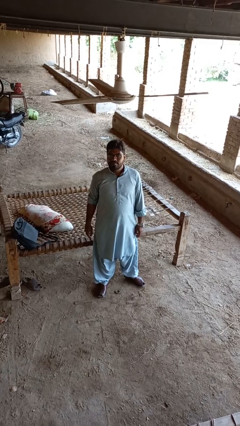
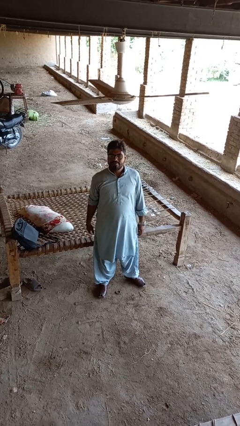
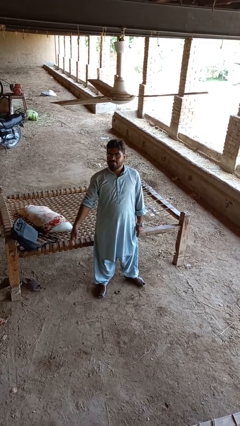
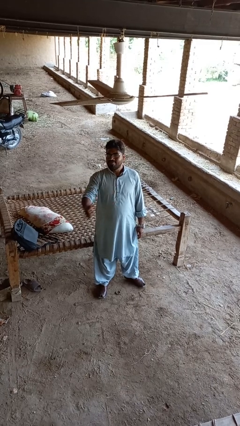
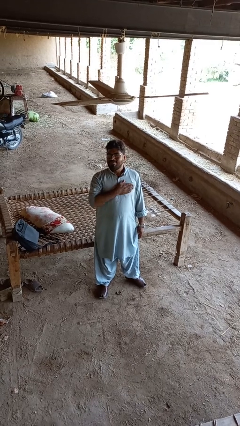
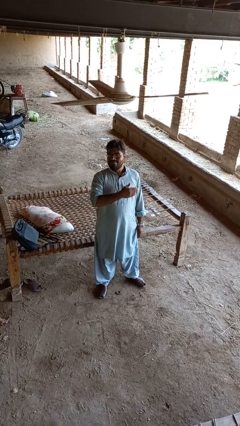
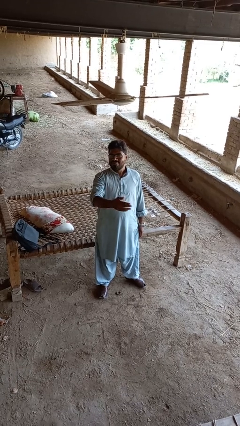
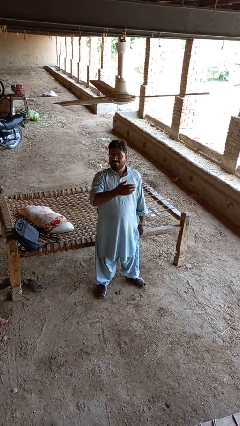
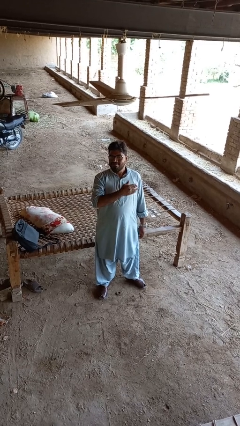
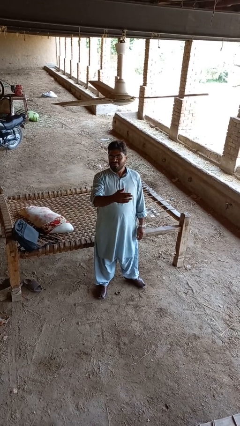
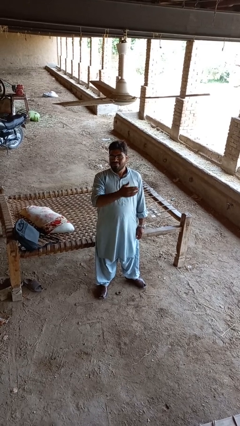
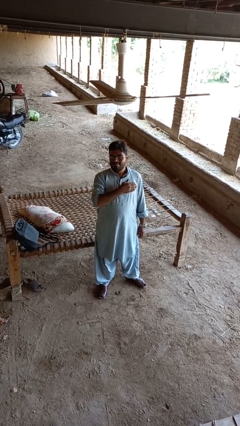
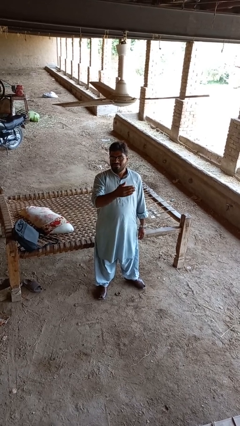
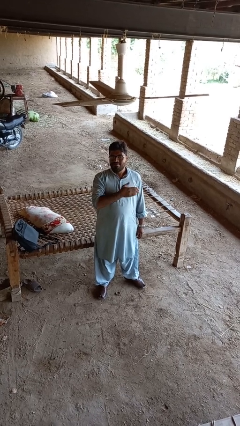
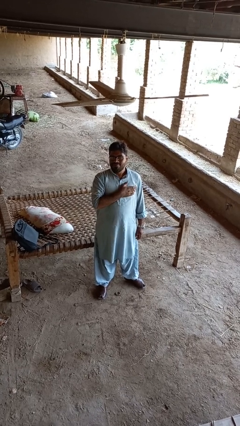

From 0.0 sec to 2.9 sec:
person drums on chest

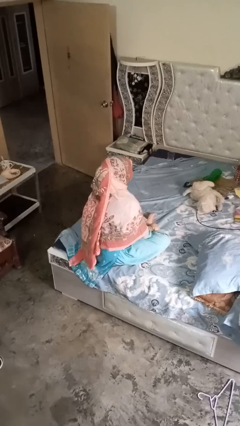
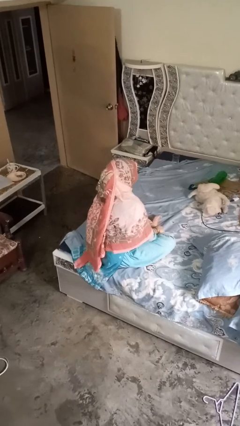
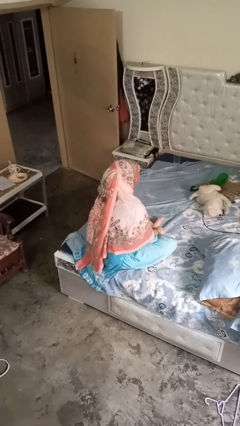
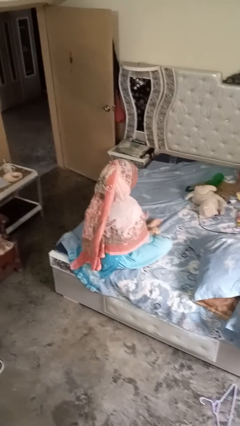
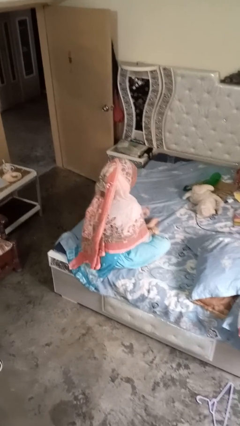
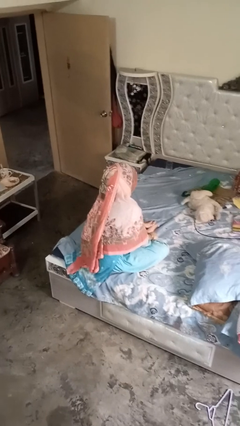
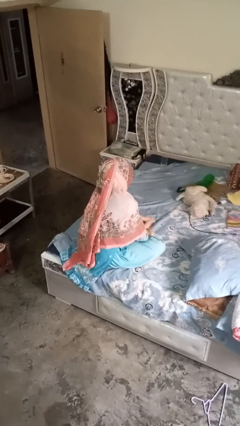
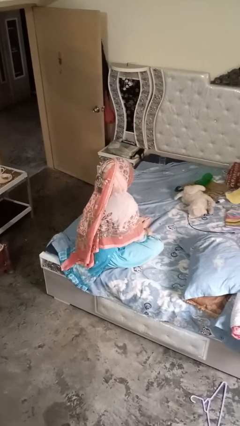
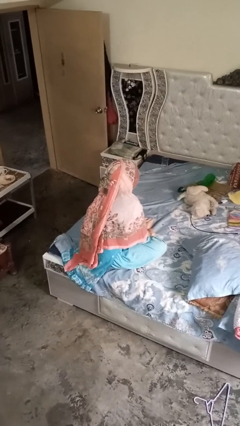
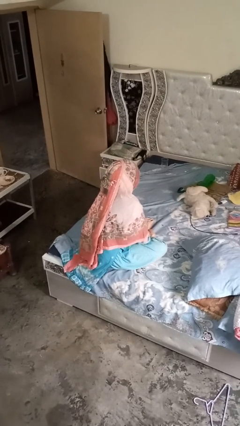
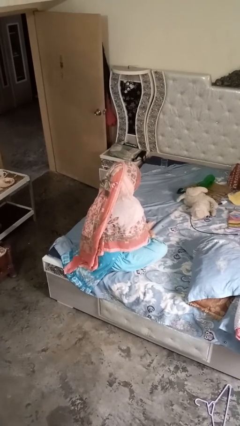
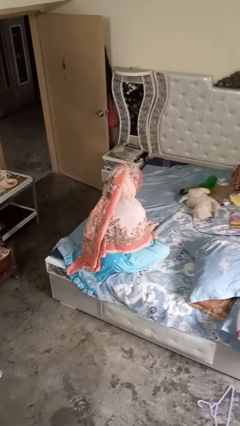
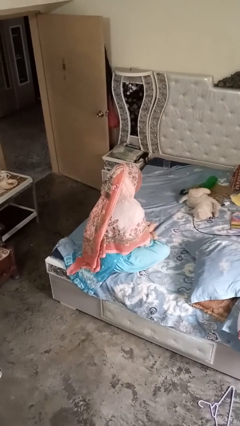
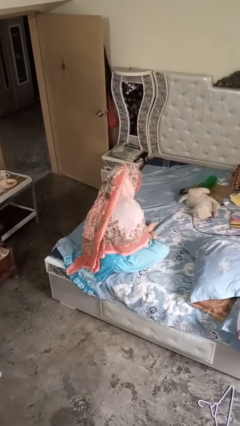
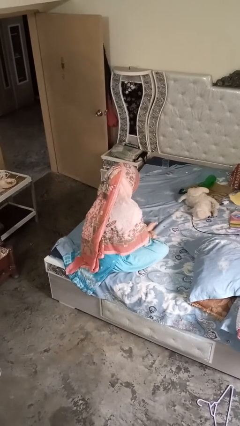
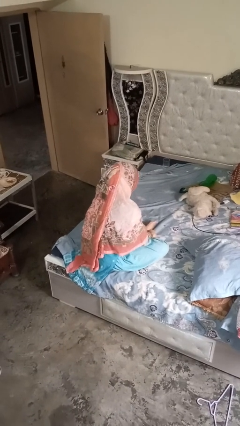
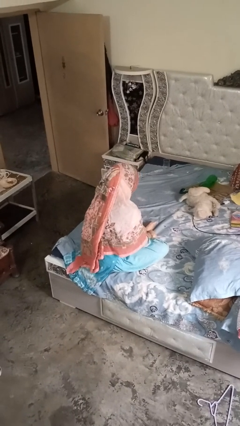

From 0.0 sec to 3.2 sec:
person rubs foot

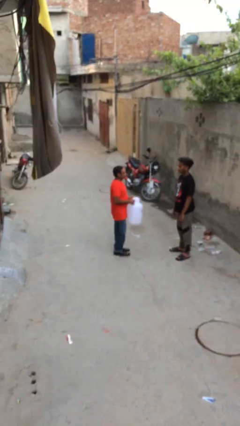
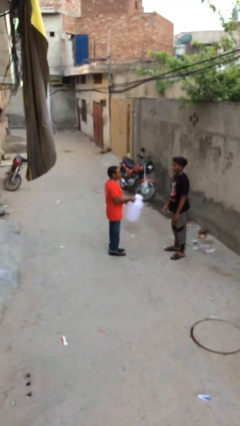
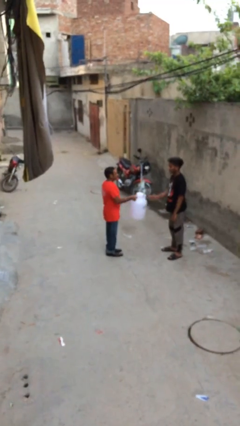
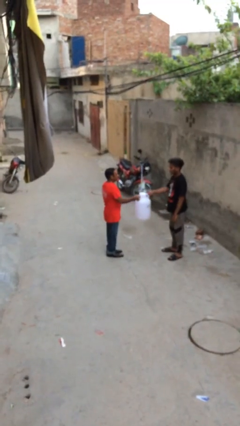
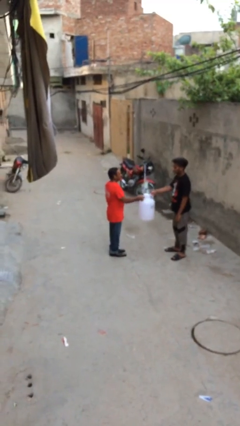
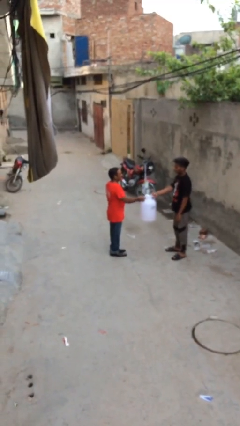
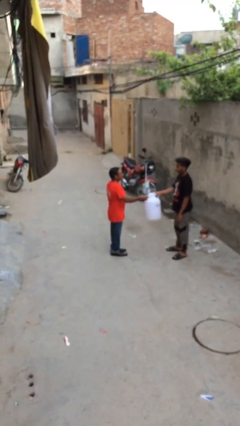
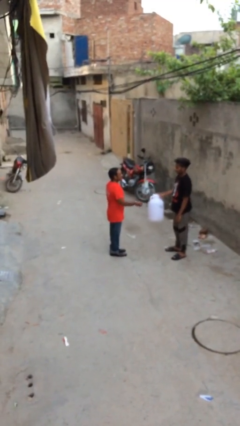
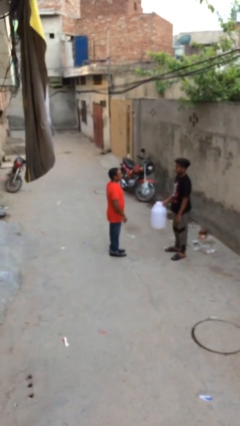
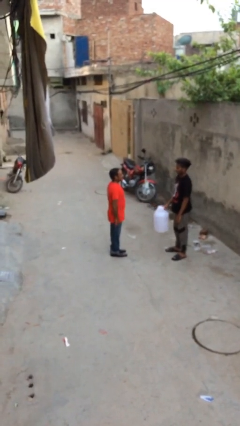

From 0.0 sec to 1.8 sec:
person transfers object to person

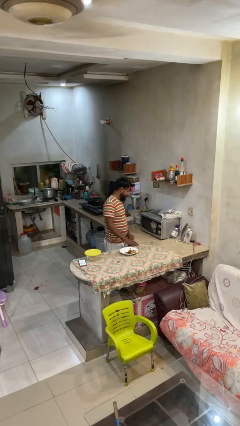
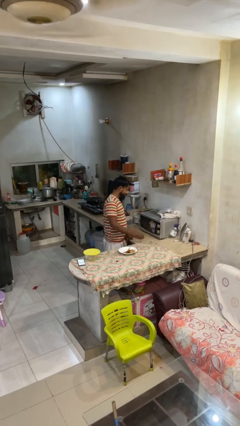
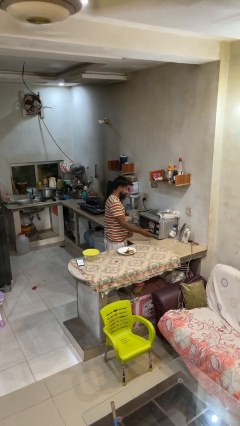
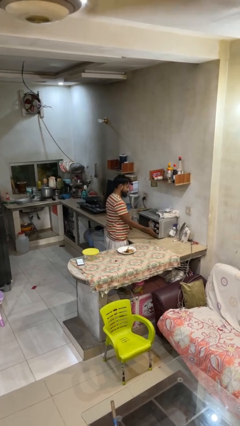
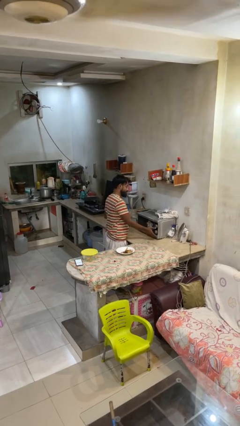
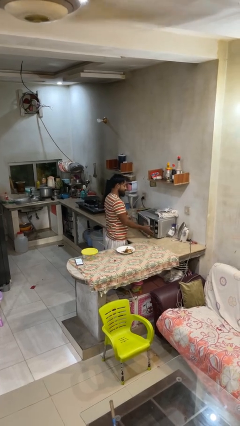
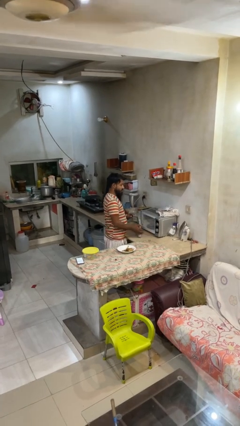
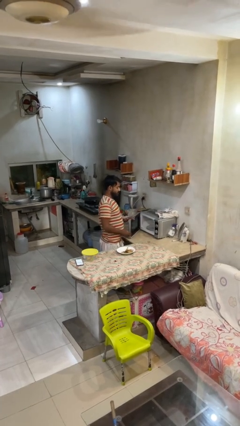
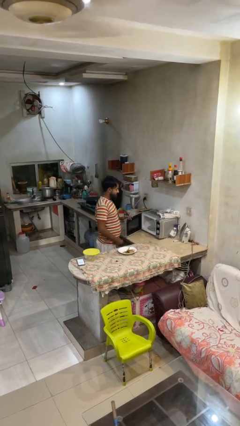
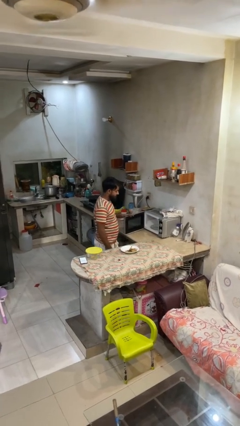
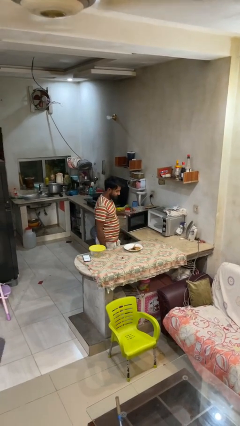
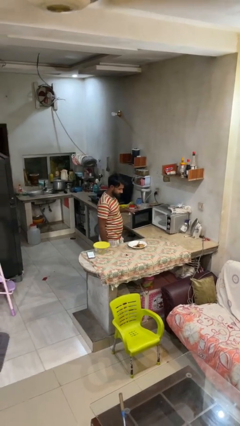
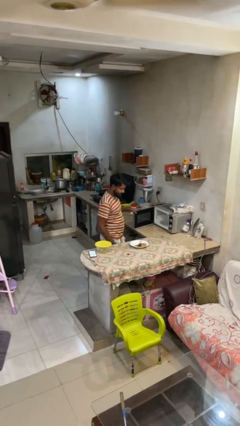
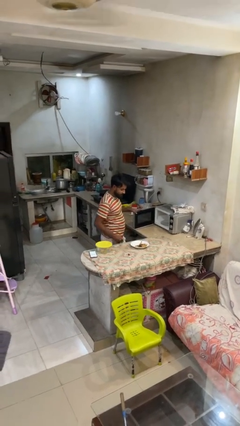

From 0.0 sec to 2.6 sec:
person opens microwave

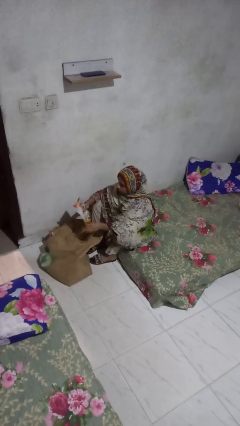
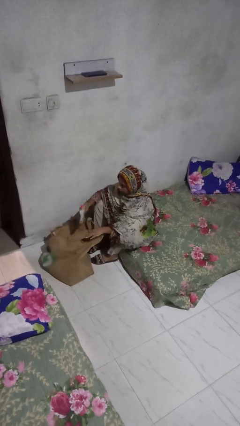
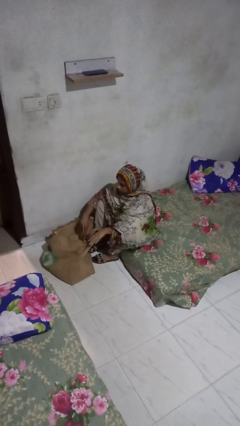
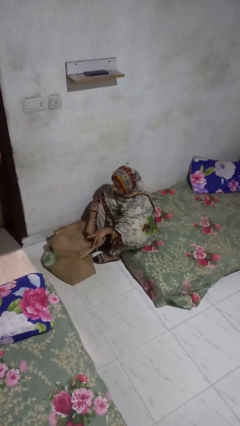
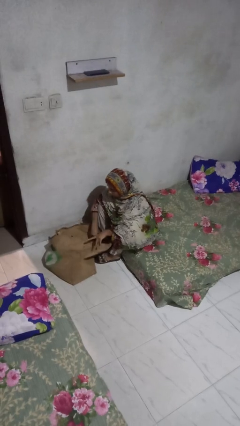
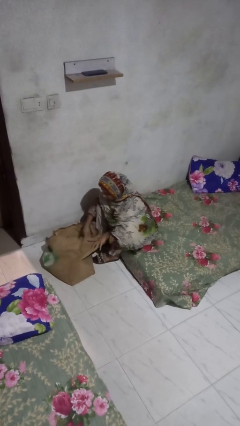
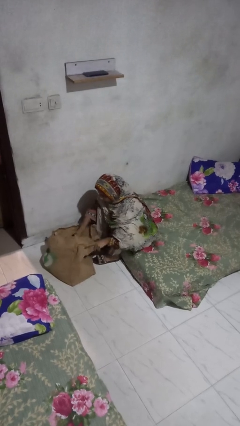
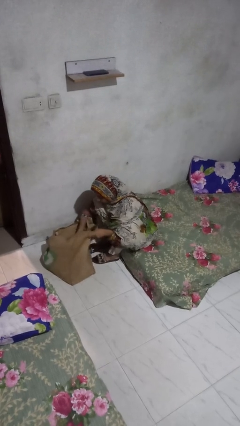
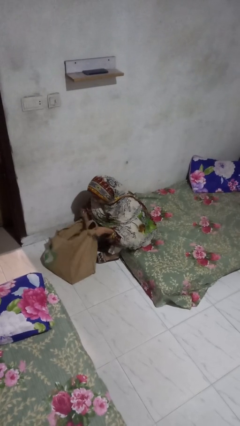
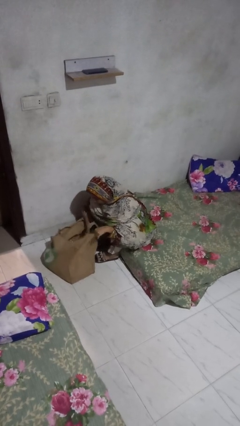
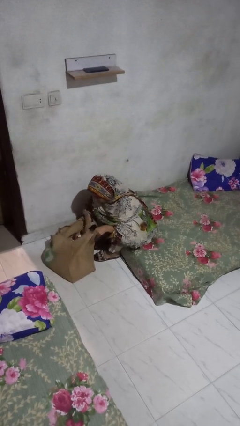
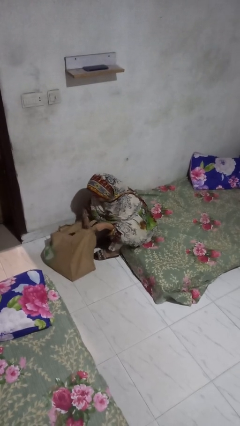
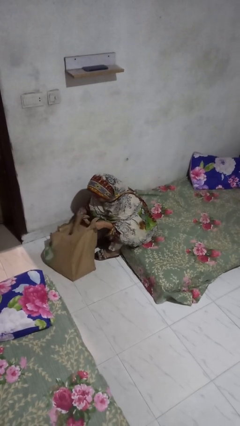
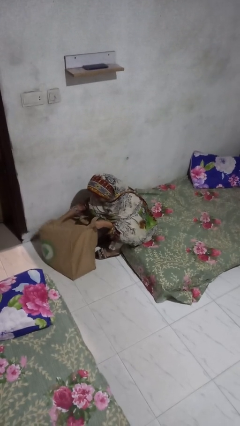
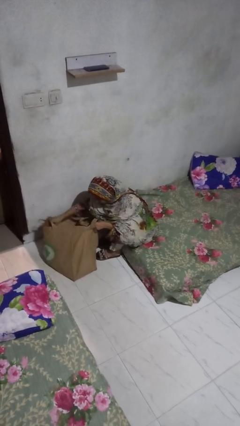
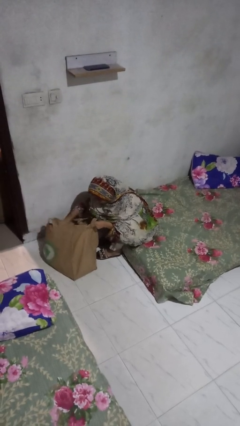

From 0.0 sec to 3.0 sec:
person puts object into bag

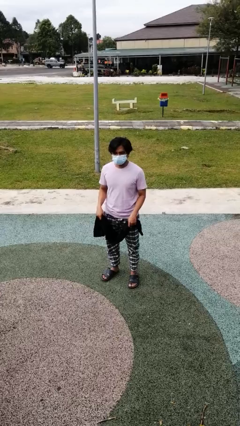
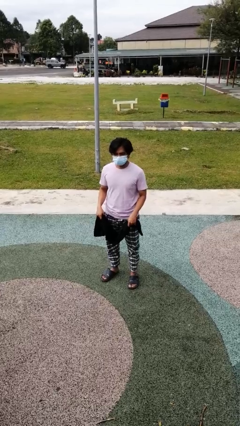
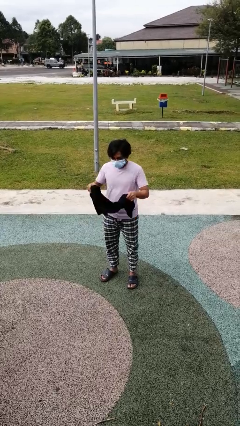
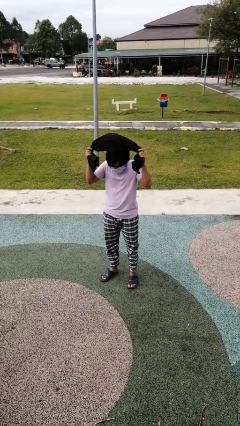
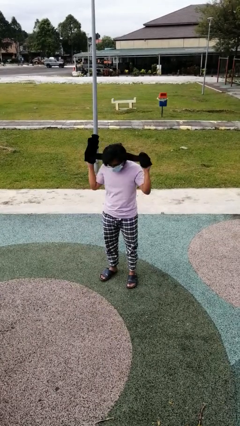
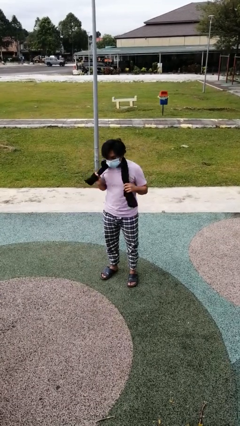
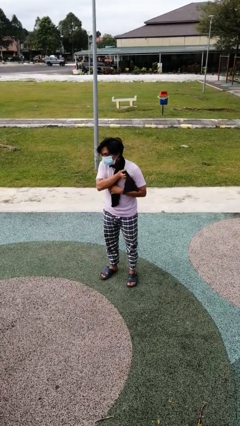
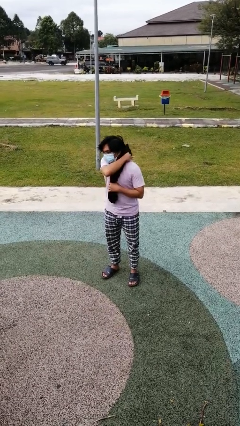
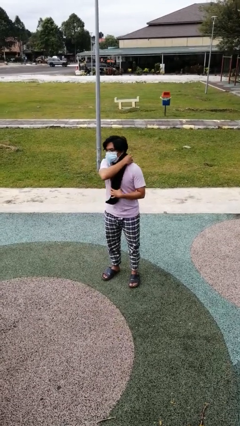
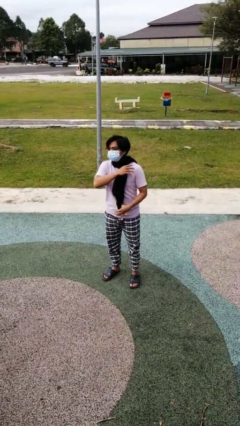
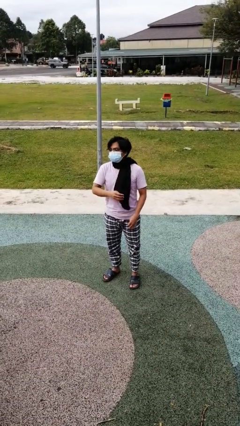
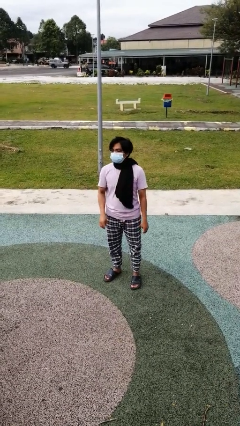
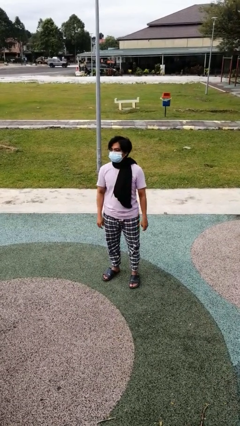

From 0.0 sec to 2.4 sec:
person puts on scarf

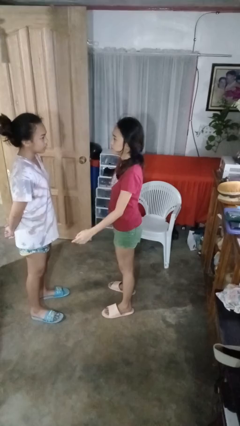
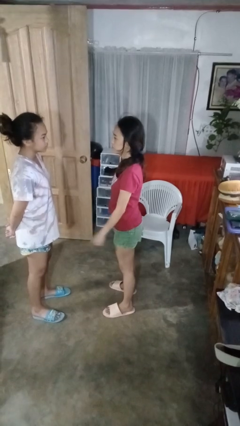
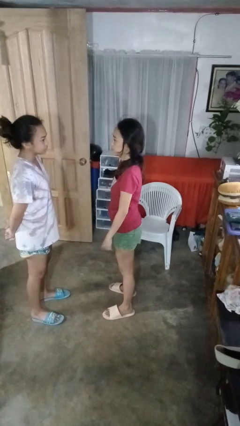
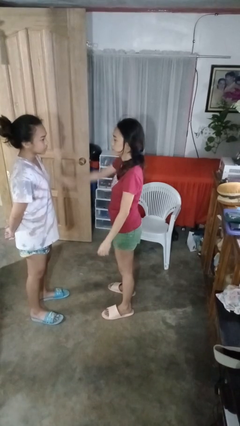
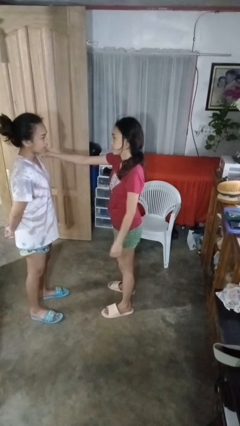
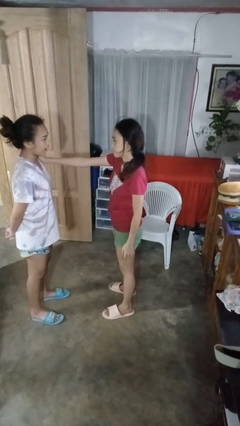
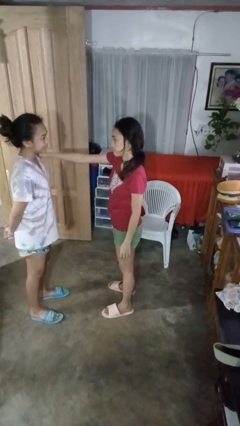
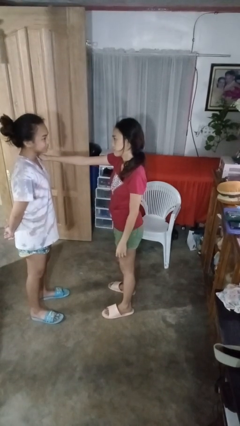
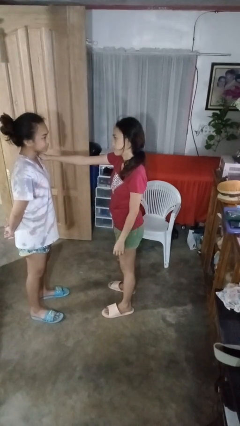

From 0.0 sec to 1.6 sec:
person pounds shoulders of person
